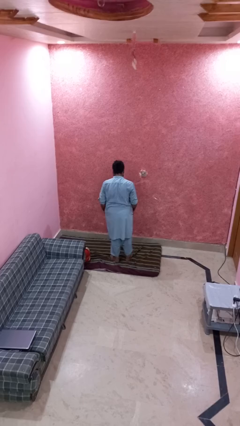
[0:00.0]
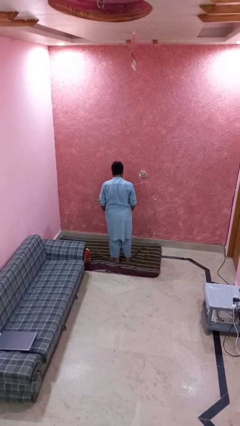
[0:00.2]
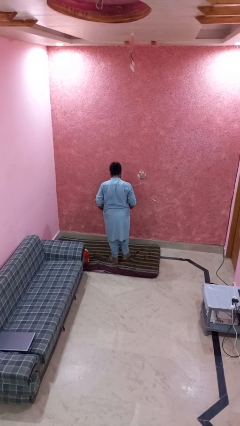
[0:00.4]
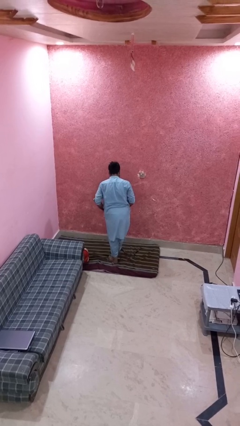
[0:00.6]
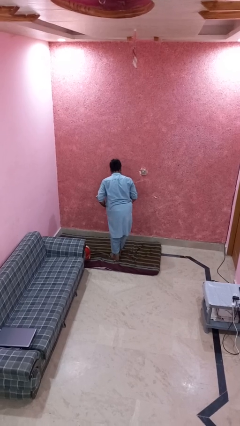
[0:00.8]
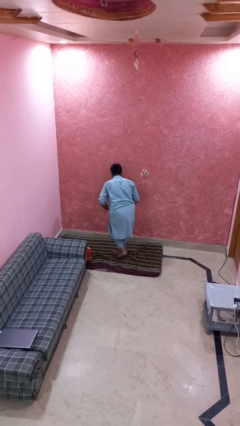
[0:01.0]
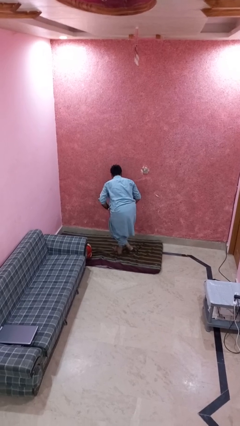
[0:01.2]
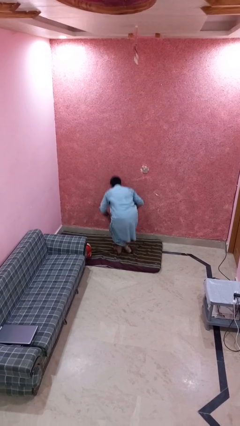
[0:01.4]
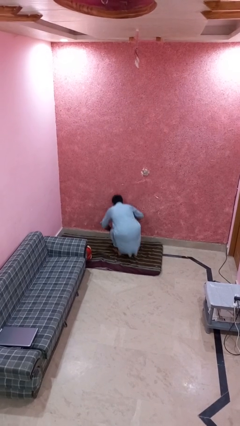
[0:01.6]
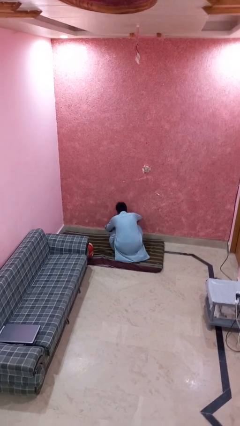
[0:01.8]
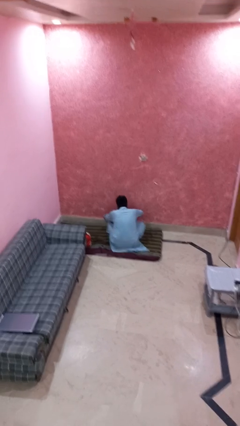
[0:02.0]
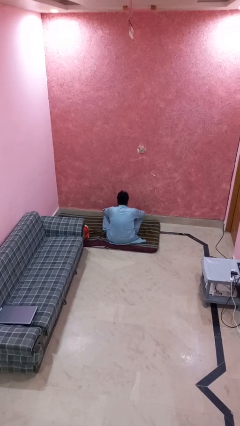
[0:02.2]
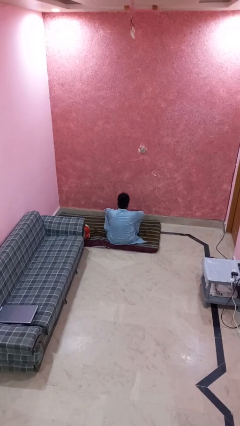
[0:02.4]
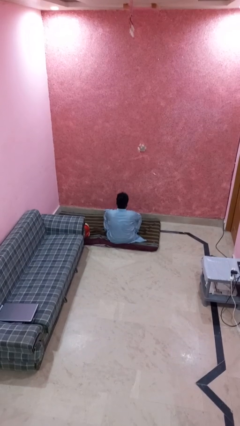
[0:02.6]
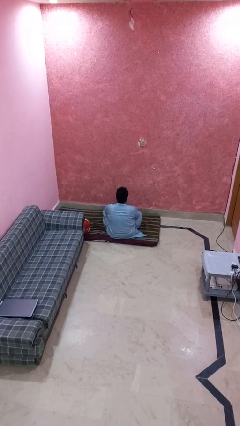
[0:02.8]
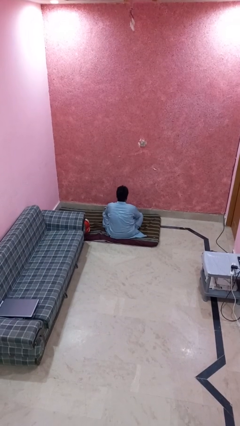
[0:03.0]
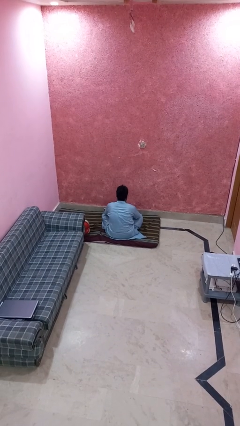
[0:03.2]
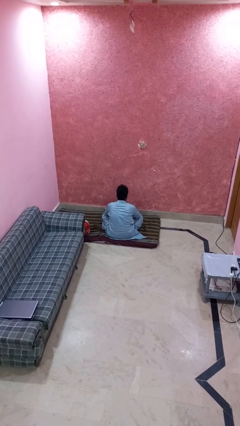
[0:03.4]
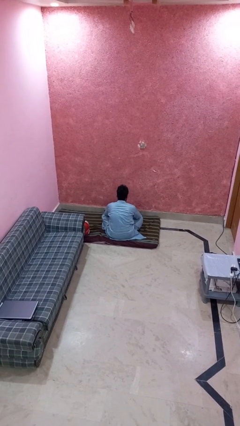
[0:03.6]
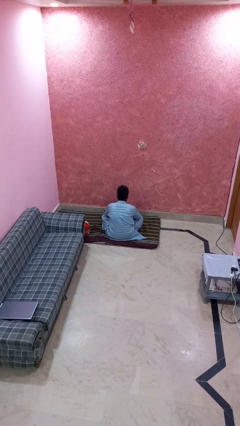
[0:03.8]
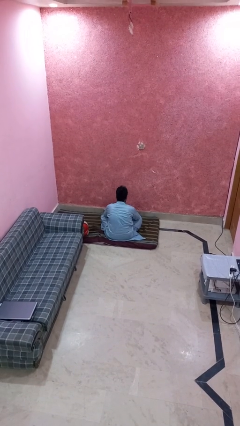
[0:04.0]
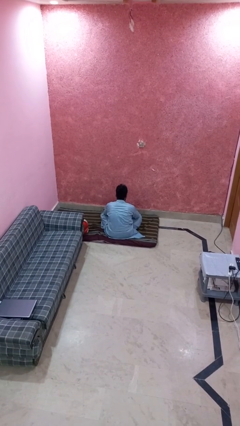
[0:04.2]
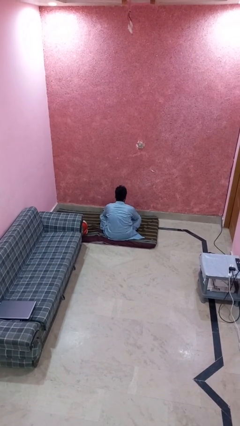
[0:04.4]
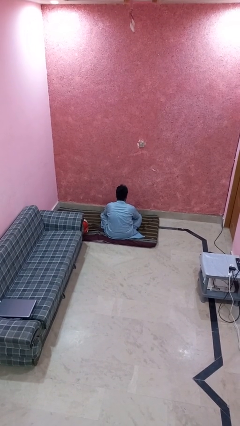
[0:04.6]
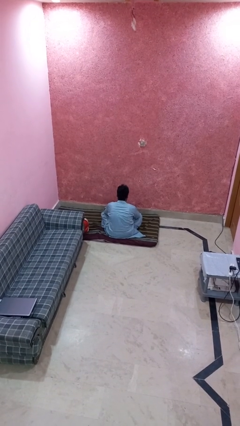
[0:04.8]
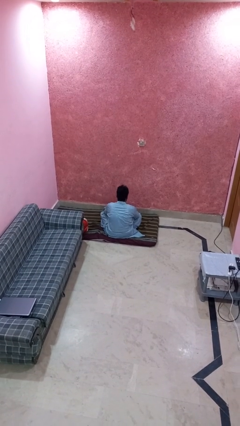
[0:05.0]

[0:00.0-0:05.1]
person sits crisscross

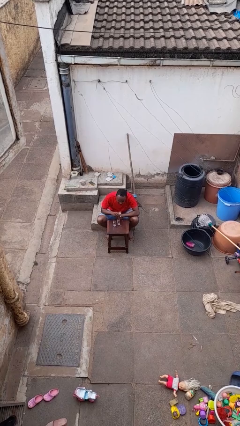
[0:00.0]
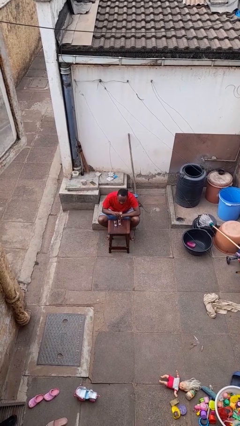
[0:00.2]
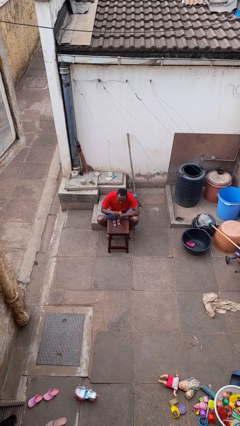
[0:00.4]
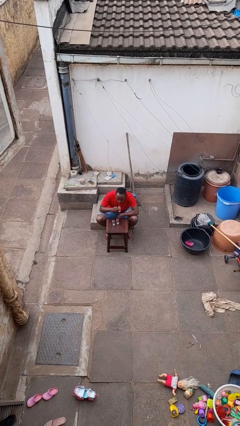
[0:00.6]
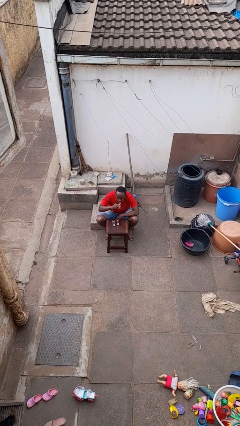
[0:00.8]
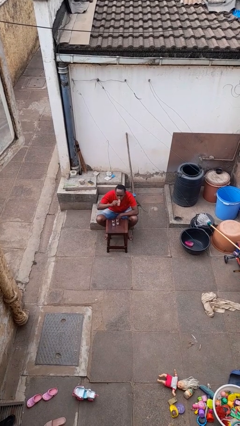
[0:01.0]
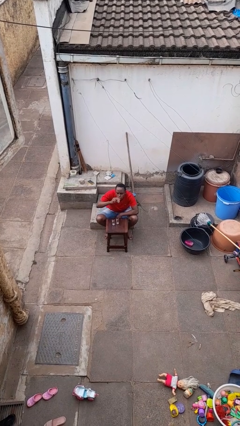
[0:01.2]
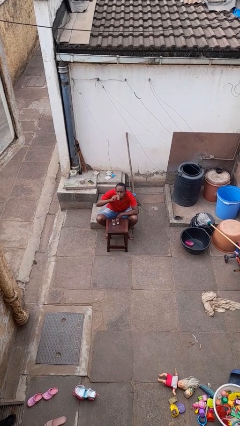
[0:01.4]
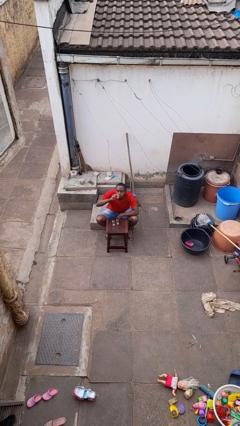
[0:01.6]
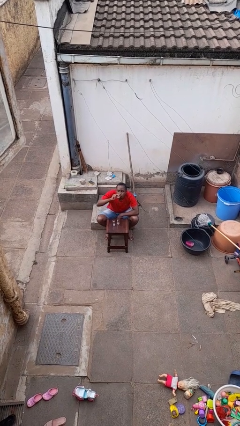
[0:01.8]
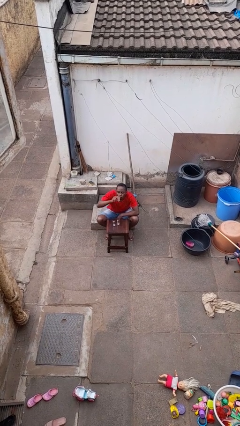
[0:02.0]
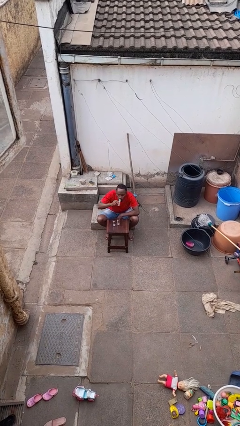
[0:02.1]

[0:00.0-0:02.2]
person drinks from shotglass

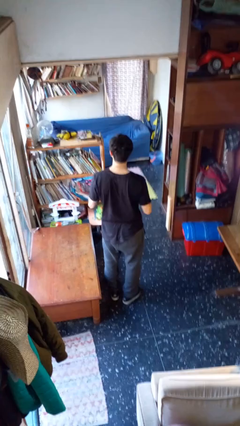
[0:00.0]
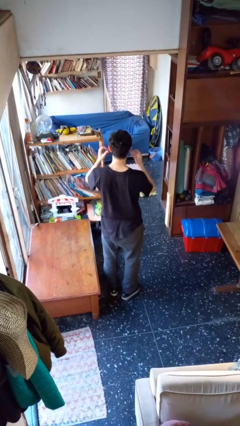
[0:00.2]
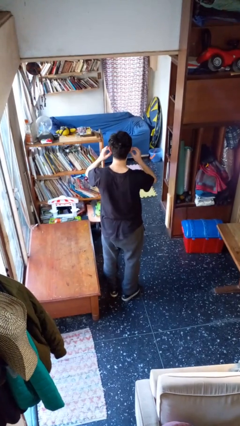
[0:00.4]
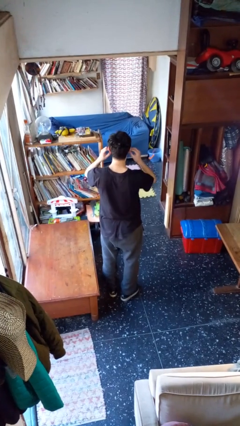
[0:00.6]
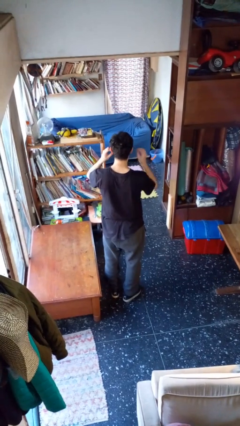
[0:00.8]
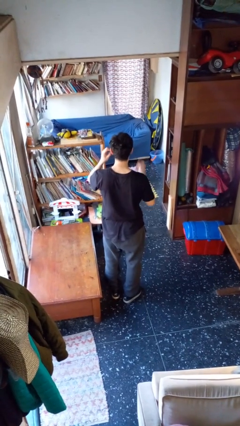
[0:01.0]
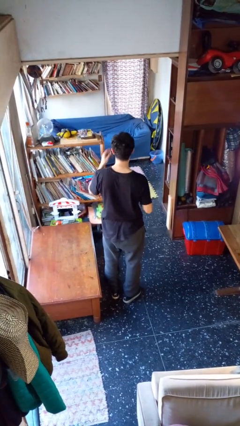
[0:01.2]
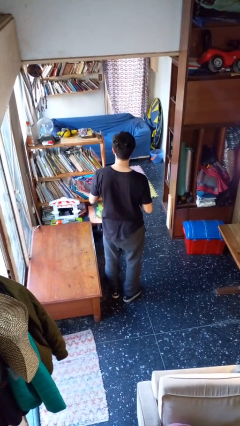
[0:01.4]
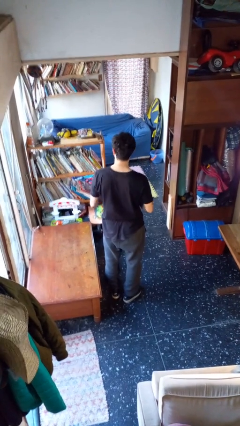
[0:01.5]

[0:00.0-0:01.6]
person takes off headphones

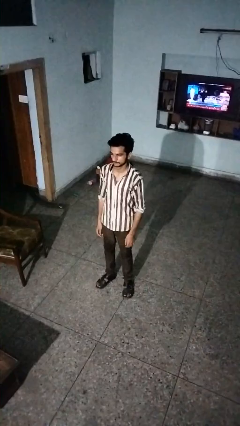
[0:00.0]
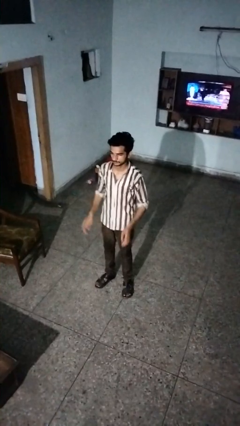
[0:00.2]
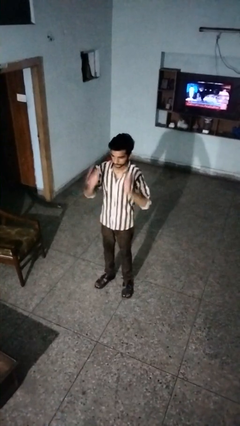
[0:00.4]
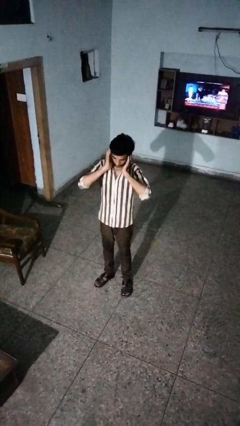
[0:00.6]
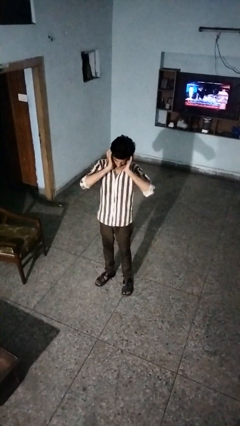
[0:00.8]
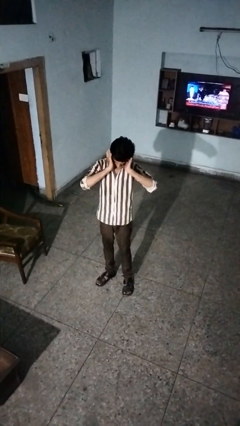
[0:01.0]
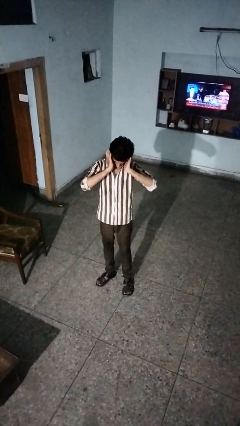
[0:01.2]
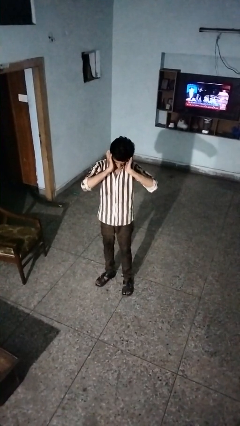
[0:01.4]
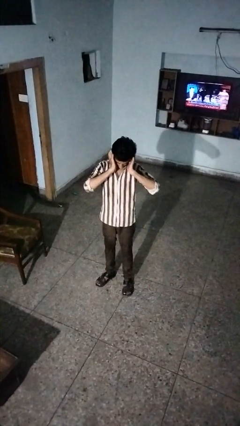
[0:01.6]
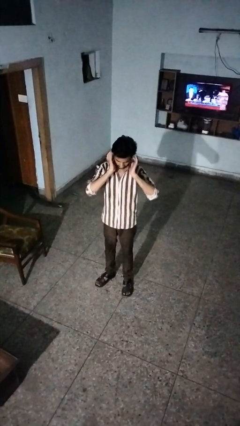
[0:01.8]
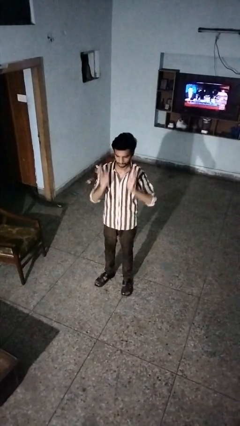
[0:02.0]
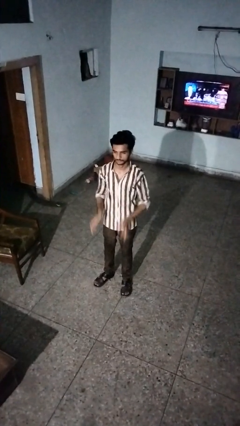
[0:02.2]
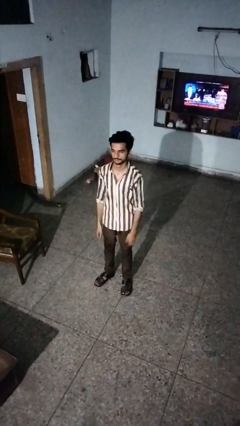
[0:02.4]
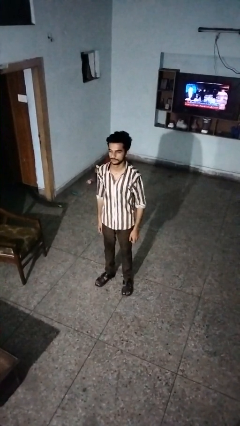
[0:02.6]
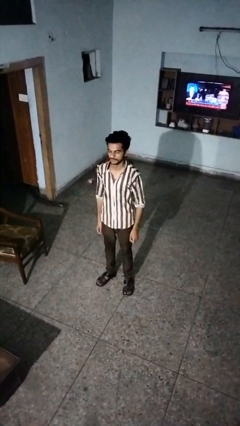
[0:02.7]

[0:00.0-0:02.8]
person puts fingers in ear

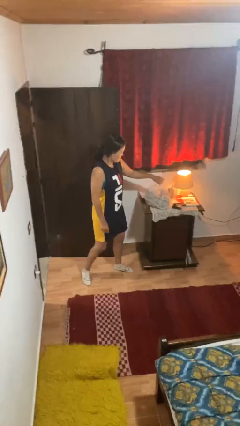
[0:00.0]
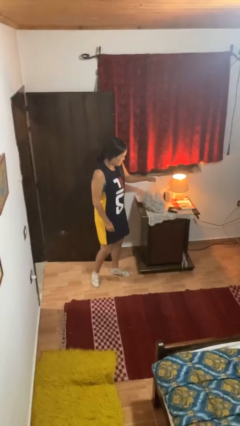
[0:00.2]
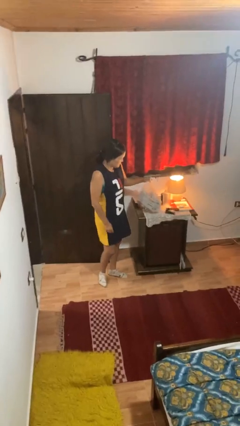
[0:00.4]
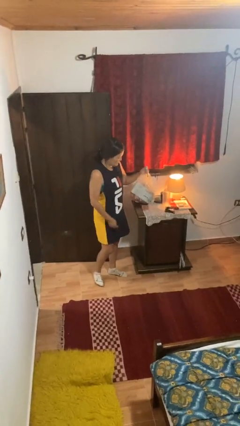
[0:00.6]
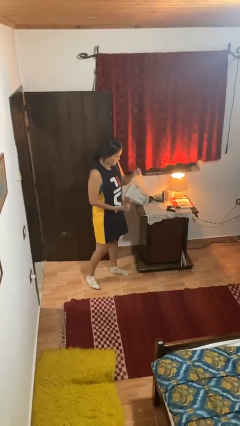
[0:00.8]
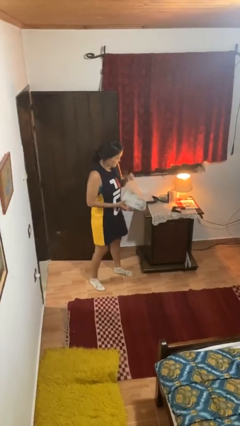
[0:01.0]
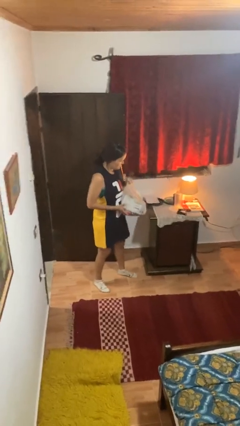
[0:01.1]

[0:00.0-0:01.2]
person picks up object from countertop

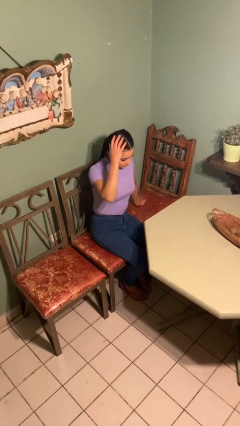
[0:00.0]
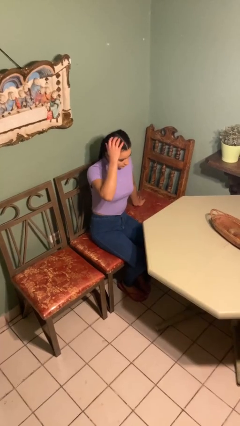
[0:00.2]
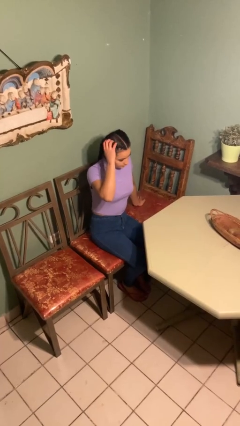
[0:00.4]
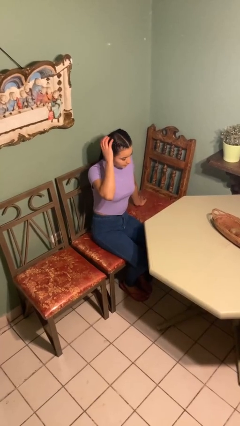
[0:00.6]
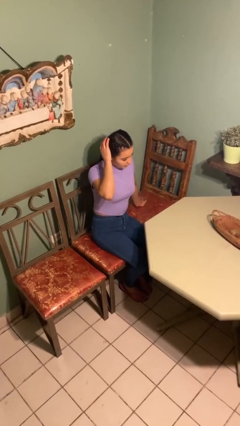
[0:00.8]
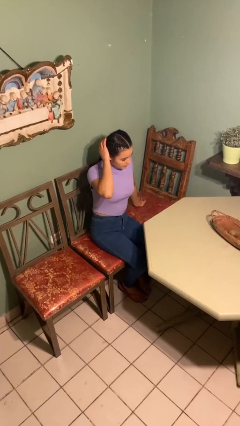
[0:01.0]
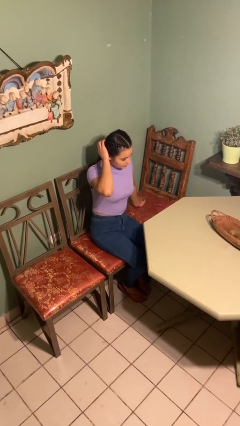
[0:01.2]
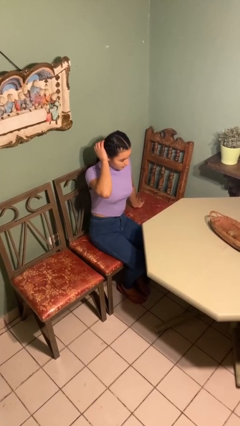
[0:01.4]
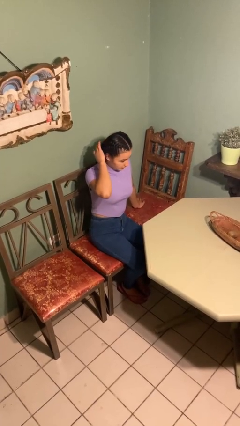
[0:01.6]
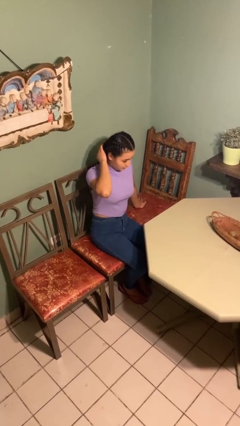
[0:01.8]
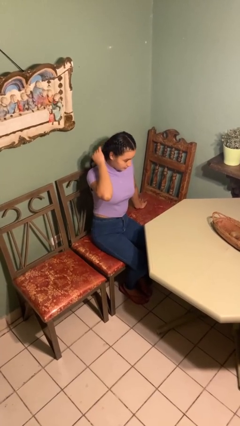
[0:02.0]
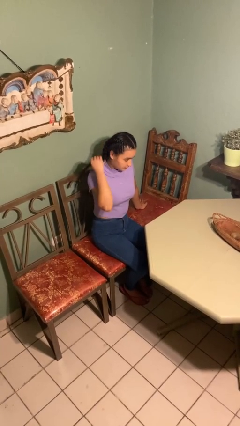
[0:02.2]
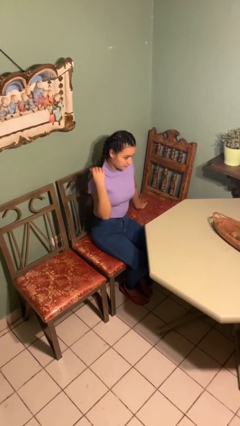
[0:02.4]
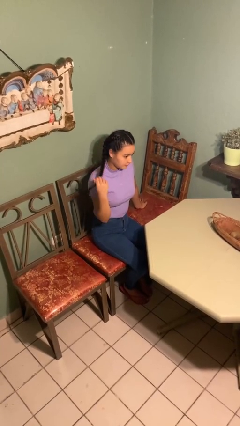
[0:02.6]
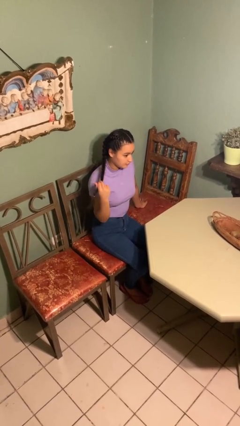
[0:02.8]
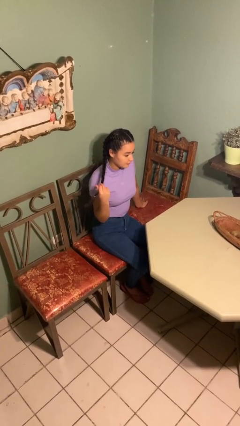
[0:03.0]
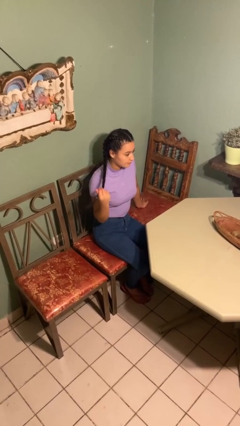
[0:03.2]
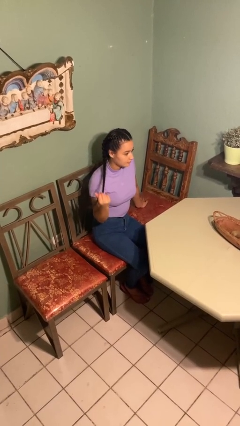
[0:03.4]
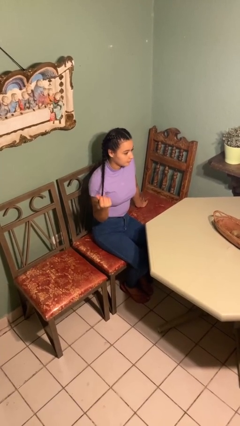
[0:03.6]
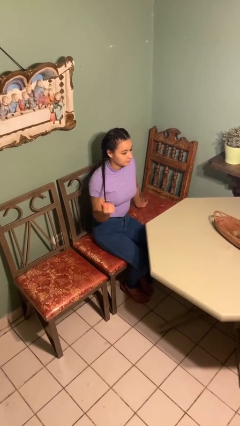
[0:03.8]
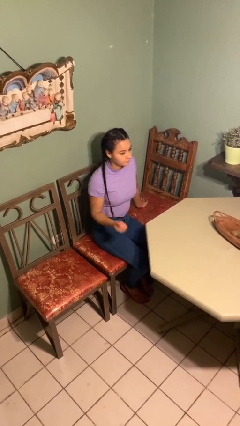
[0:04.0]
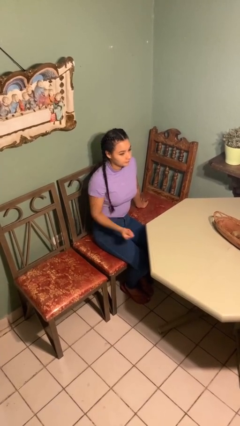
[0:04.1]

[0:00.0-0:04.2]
person strokes hair

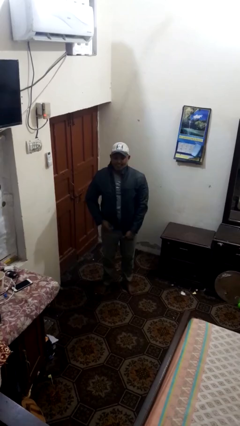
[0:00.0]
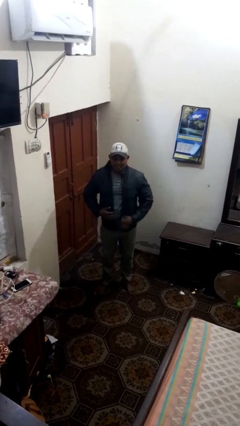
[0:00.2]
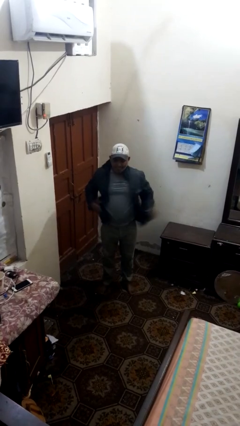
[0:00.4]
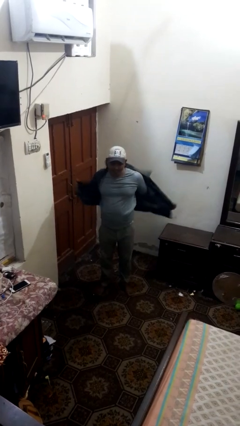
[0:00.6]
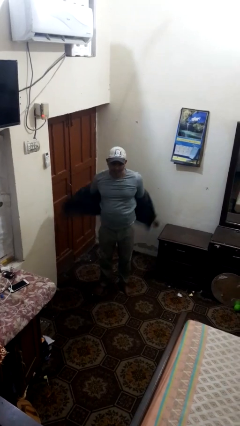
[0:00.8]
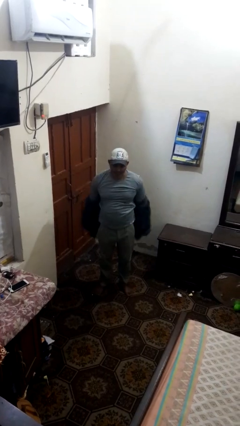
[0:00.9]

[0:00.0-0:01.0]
person unzips jacket
